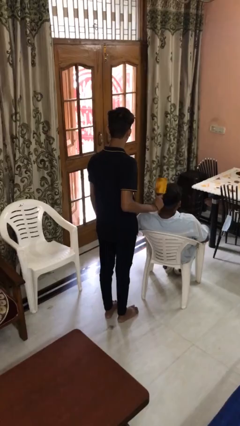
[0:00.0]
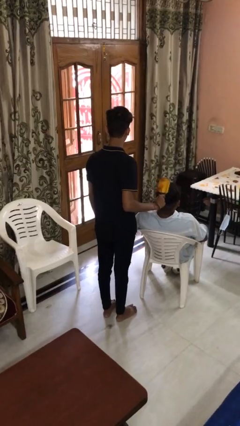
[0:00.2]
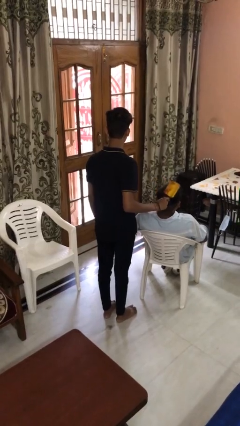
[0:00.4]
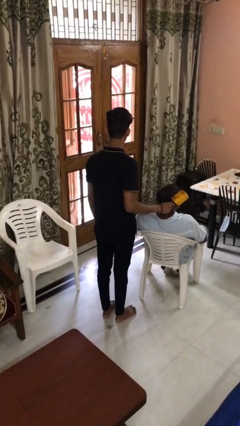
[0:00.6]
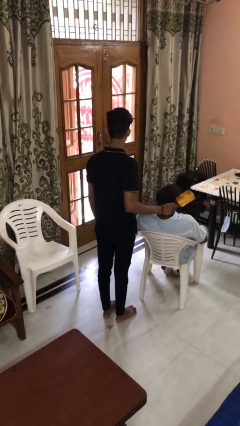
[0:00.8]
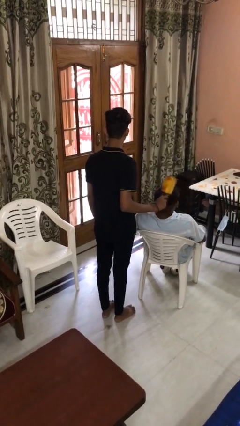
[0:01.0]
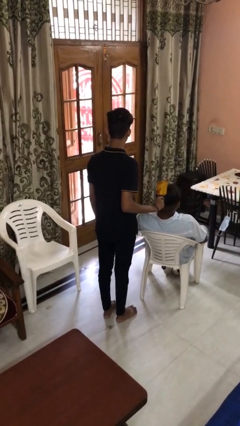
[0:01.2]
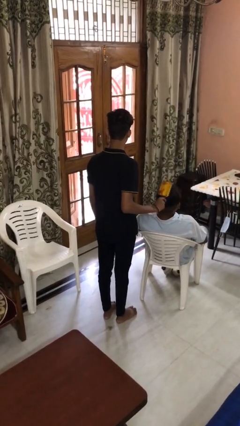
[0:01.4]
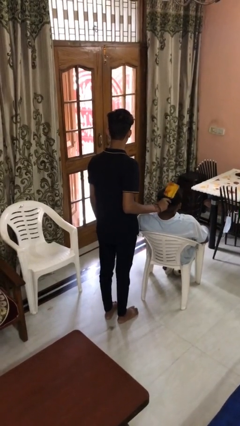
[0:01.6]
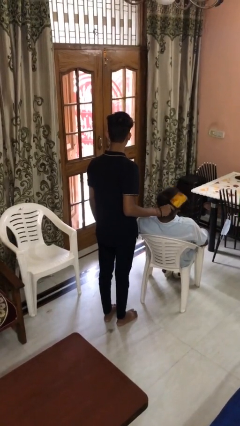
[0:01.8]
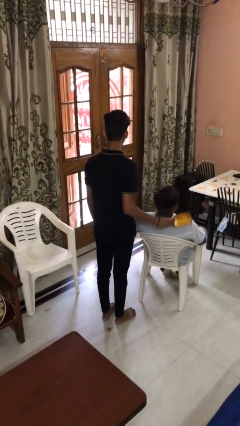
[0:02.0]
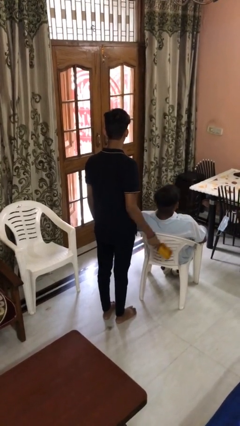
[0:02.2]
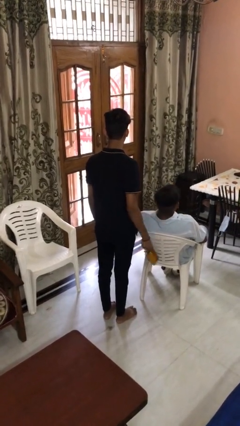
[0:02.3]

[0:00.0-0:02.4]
person brushes hair of person

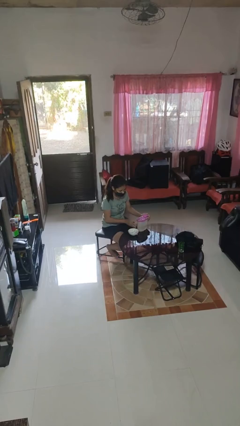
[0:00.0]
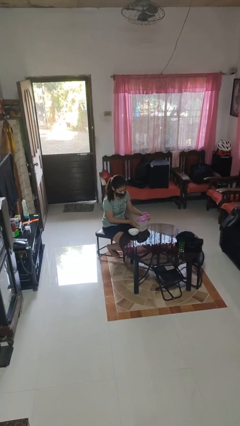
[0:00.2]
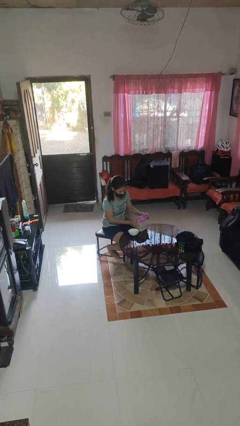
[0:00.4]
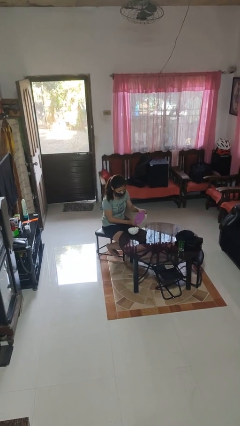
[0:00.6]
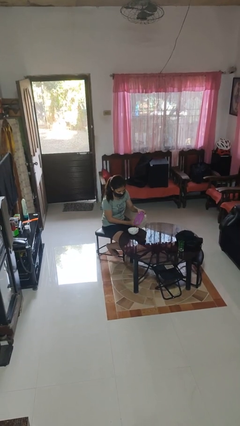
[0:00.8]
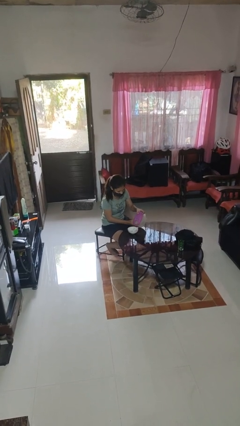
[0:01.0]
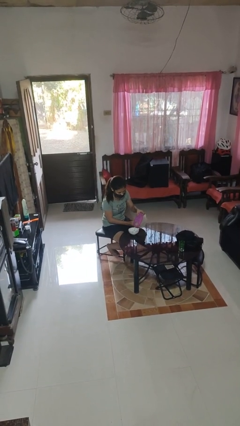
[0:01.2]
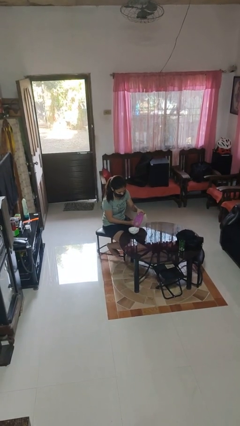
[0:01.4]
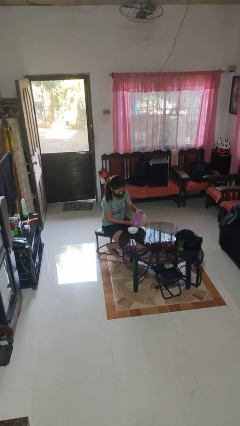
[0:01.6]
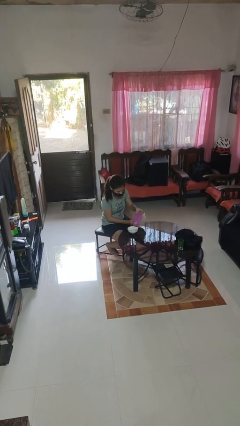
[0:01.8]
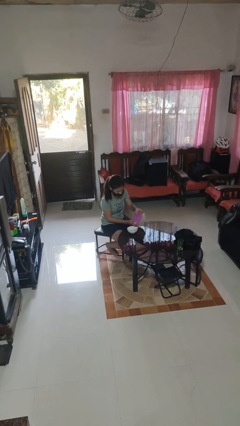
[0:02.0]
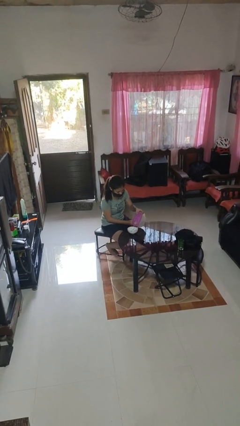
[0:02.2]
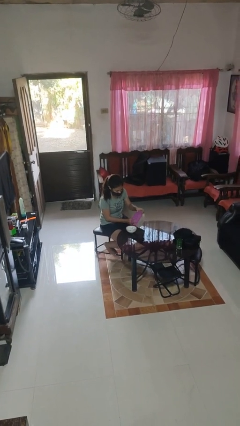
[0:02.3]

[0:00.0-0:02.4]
person pours into bowl

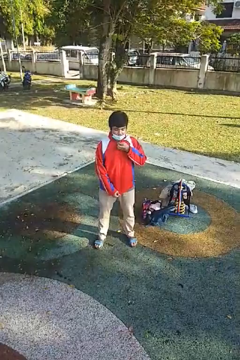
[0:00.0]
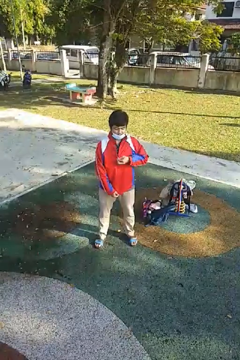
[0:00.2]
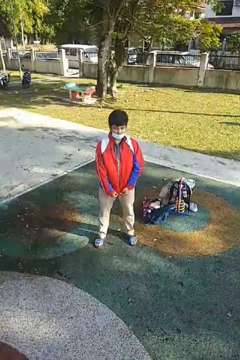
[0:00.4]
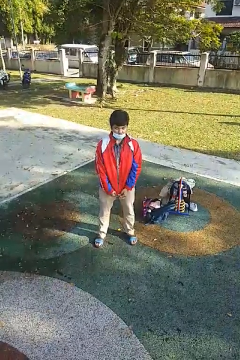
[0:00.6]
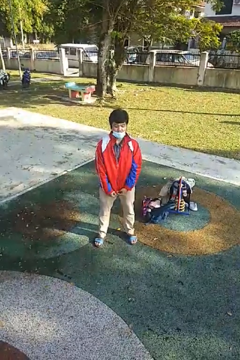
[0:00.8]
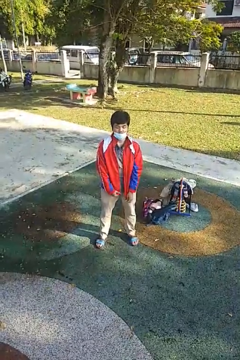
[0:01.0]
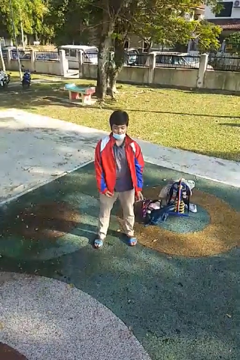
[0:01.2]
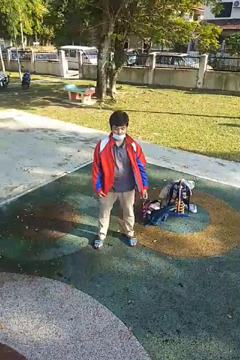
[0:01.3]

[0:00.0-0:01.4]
person unzips jacket

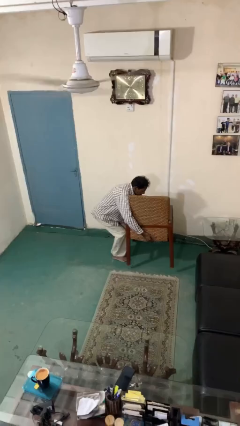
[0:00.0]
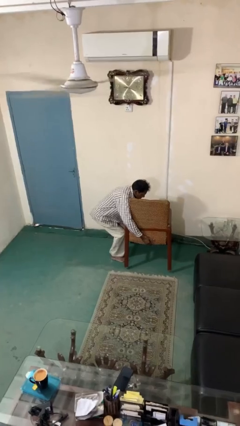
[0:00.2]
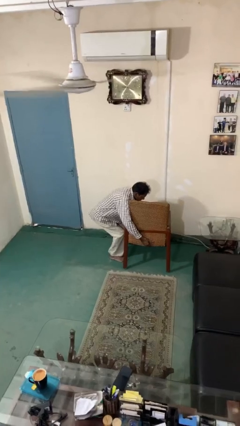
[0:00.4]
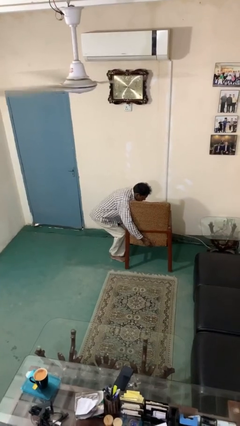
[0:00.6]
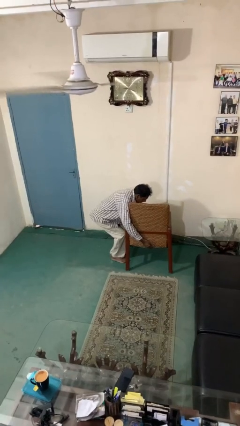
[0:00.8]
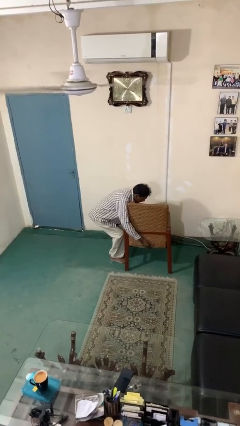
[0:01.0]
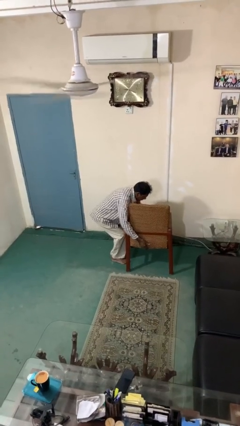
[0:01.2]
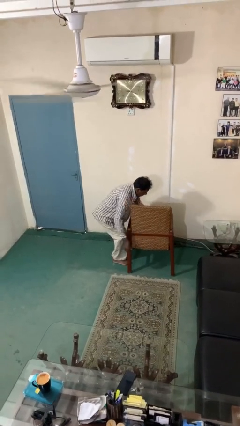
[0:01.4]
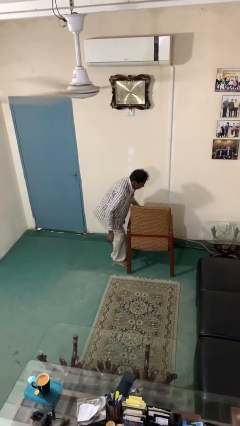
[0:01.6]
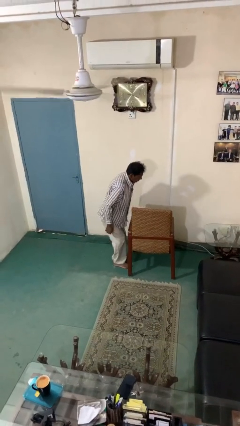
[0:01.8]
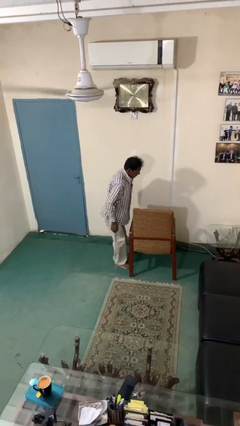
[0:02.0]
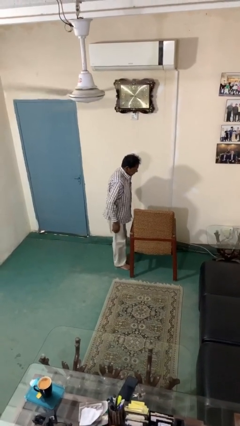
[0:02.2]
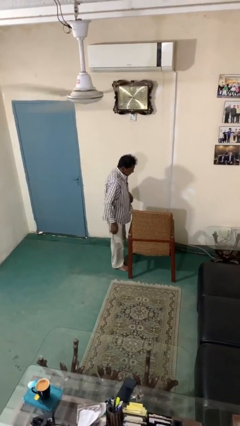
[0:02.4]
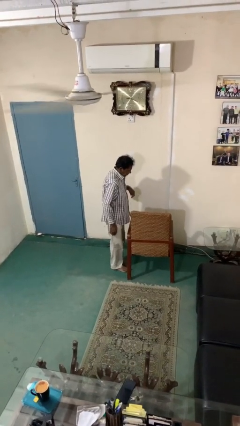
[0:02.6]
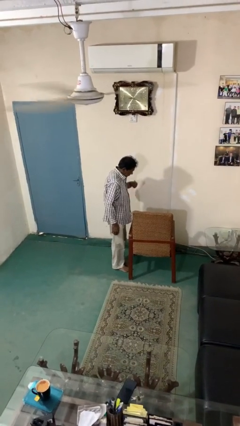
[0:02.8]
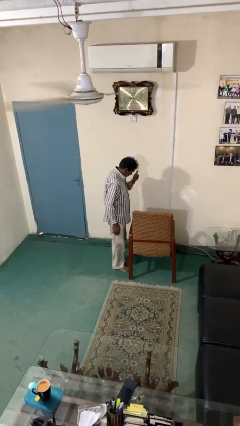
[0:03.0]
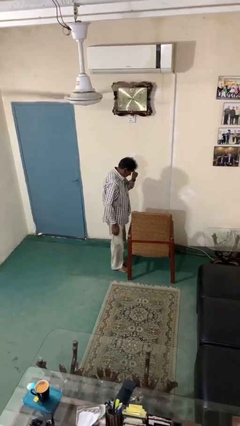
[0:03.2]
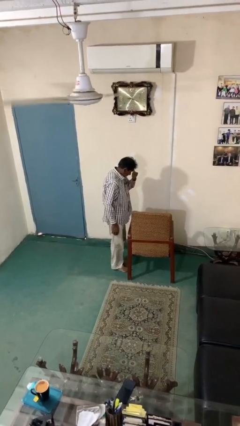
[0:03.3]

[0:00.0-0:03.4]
person puts down object on floor

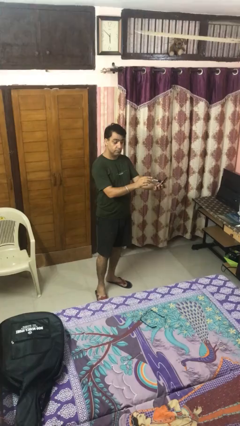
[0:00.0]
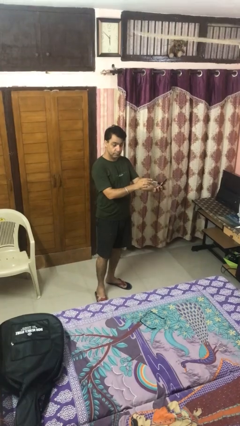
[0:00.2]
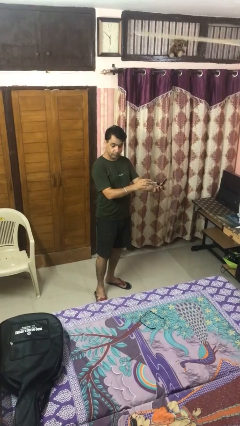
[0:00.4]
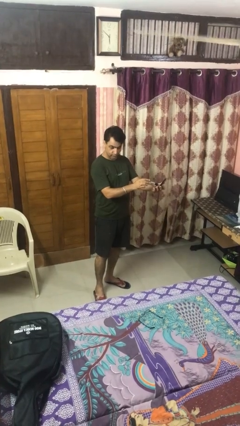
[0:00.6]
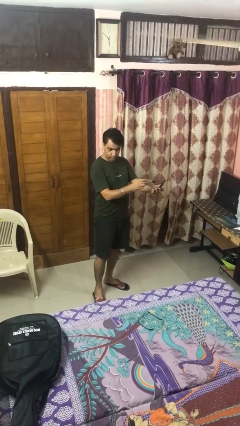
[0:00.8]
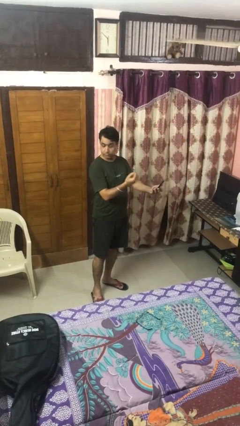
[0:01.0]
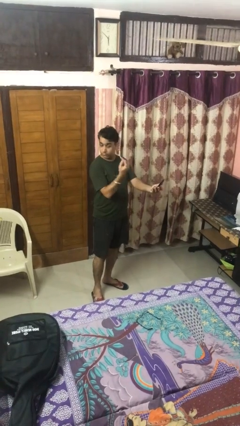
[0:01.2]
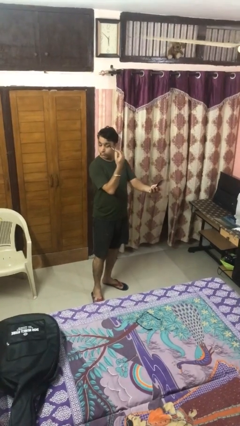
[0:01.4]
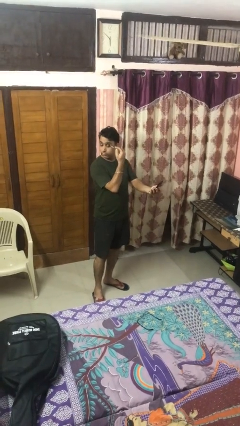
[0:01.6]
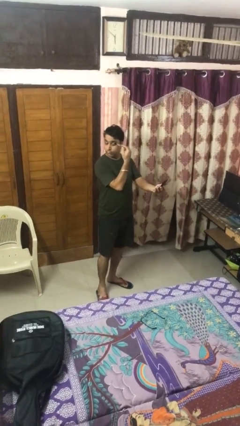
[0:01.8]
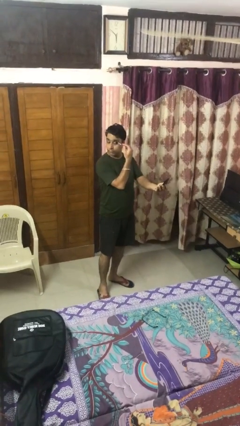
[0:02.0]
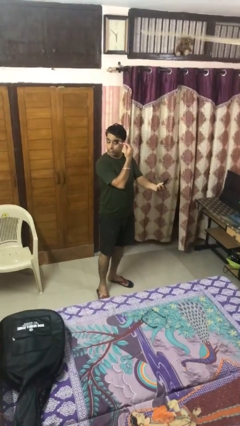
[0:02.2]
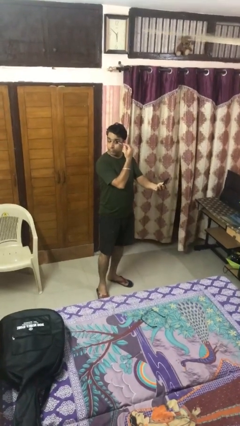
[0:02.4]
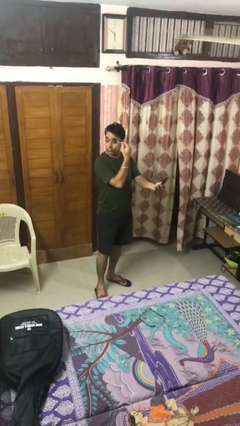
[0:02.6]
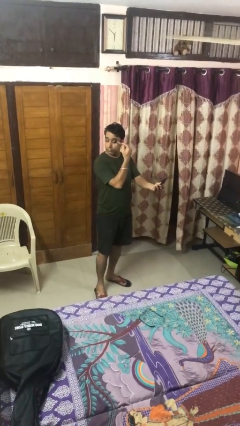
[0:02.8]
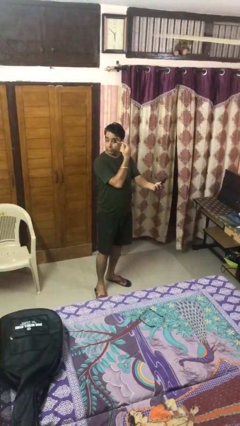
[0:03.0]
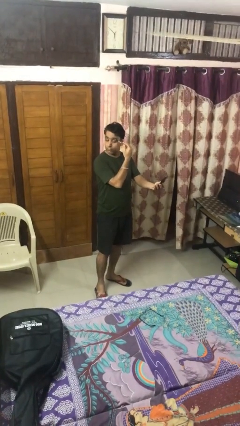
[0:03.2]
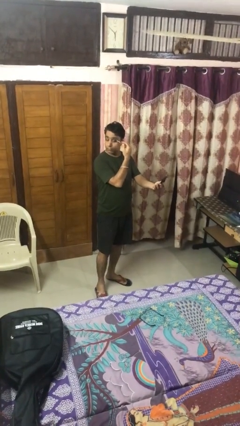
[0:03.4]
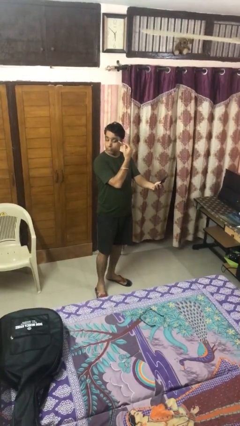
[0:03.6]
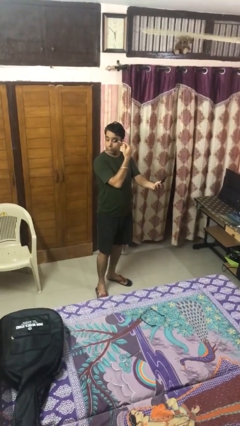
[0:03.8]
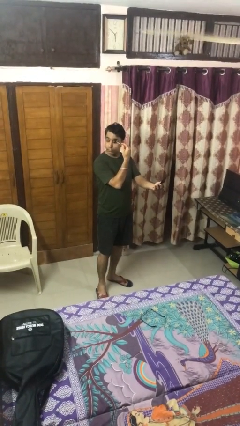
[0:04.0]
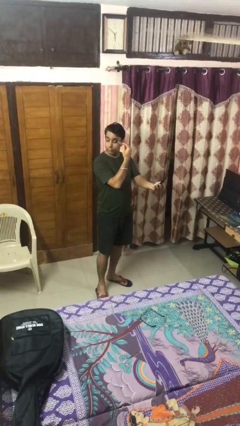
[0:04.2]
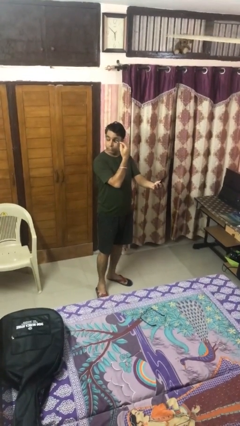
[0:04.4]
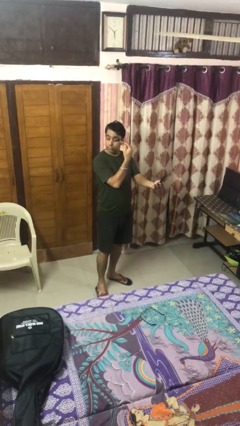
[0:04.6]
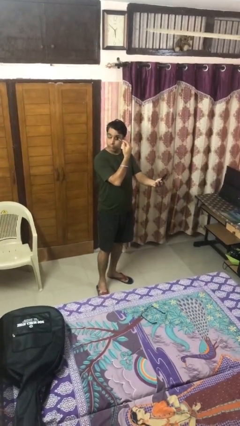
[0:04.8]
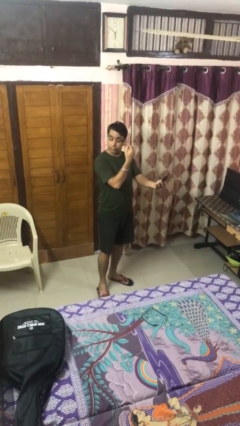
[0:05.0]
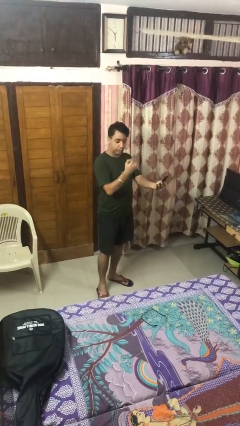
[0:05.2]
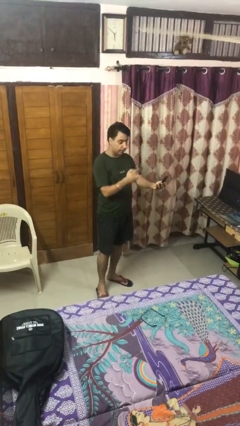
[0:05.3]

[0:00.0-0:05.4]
person applies eye makeup

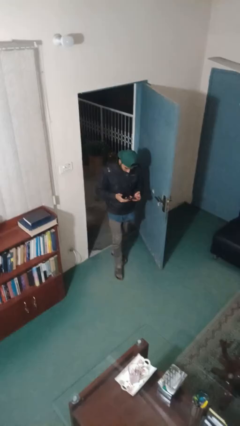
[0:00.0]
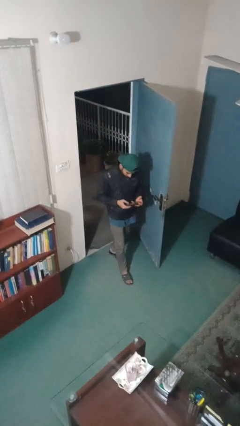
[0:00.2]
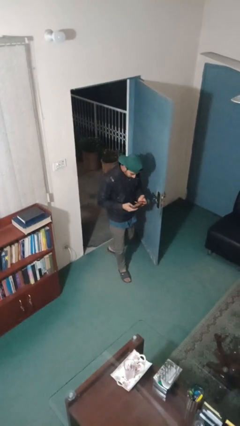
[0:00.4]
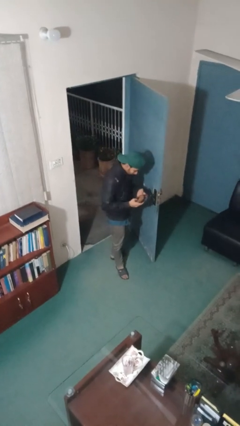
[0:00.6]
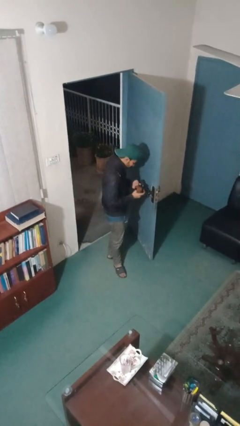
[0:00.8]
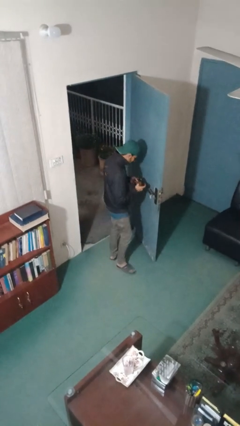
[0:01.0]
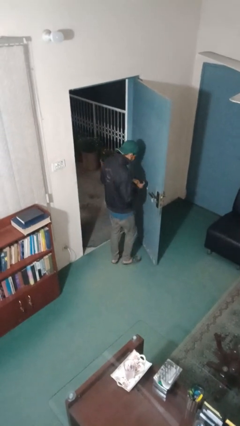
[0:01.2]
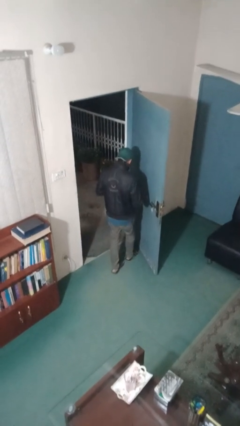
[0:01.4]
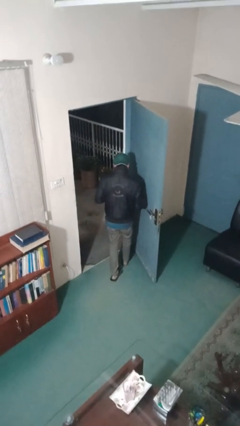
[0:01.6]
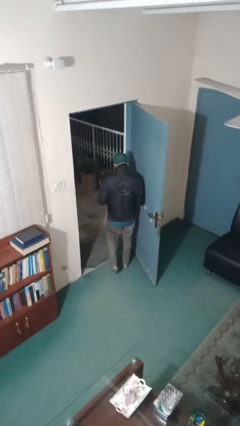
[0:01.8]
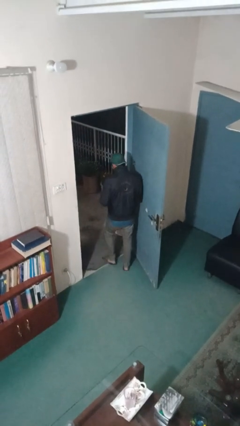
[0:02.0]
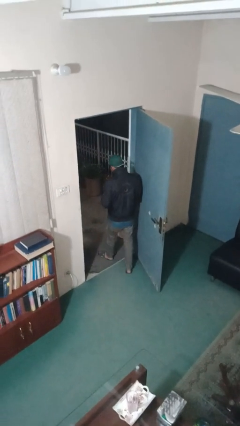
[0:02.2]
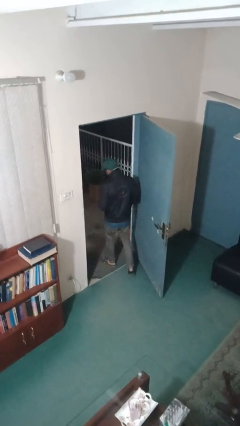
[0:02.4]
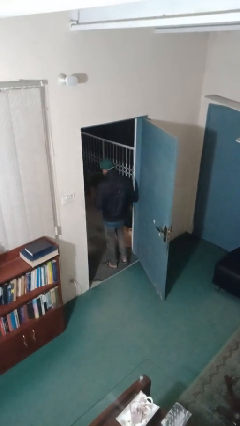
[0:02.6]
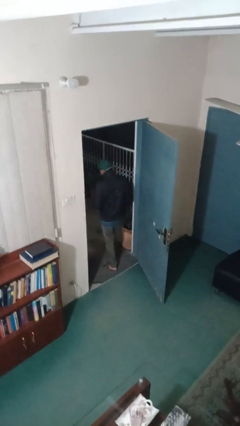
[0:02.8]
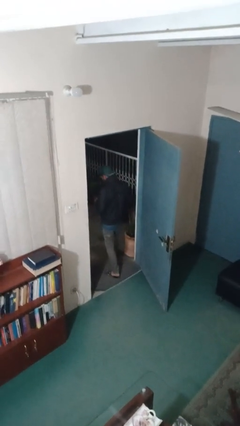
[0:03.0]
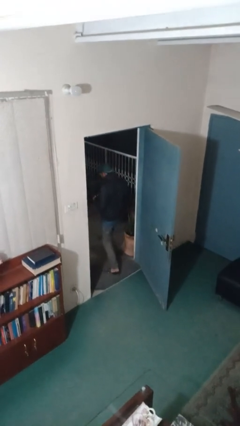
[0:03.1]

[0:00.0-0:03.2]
person exits scene through structure
